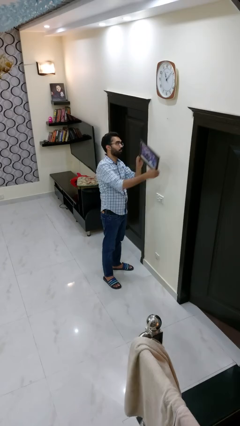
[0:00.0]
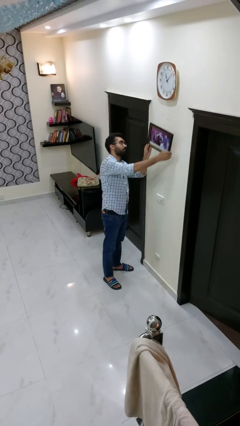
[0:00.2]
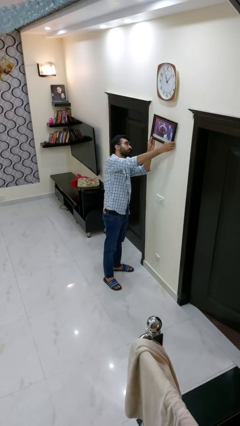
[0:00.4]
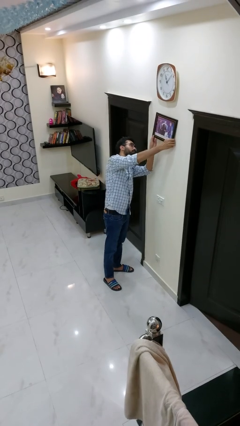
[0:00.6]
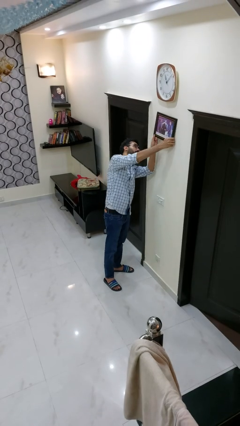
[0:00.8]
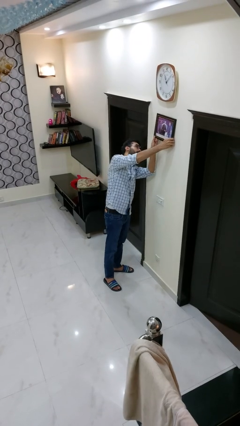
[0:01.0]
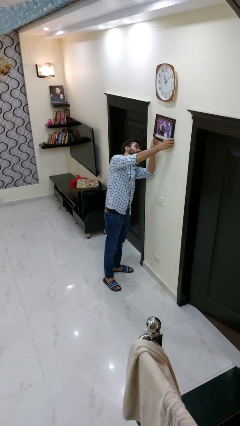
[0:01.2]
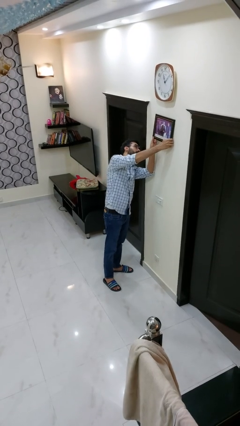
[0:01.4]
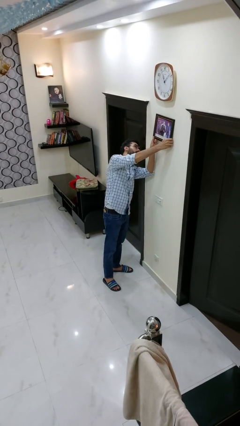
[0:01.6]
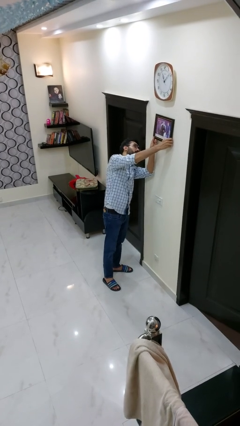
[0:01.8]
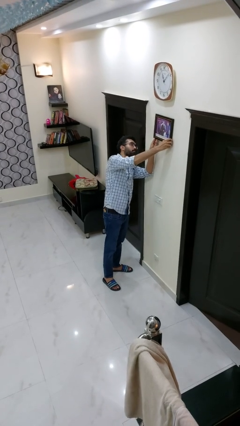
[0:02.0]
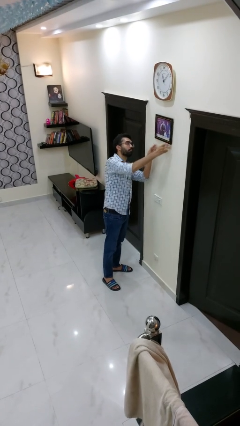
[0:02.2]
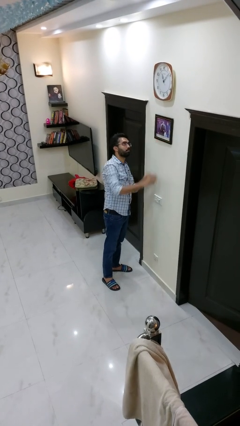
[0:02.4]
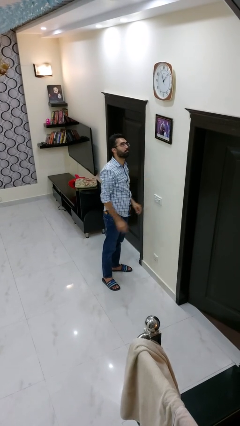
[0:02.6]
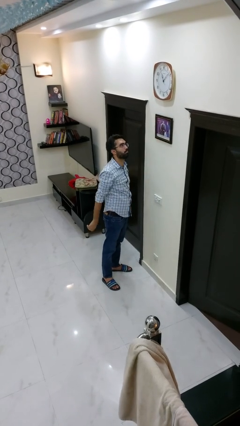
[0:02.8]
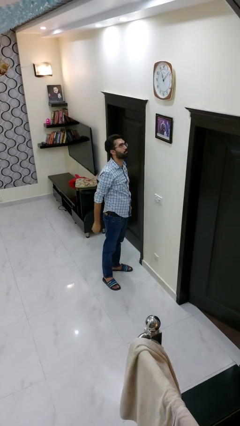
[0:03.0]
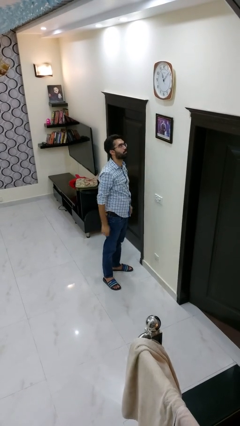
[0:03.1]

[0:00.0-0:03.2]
person puts up picture frame

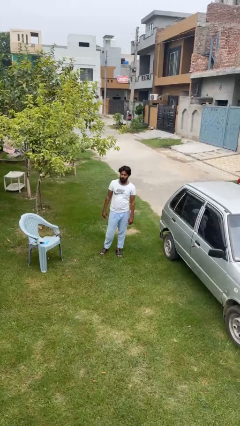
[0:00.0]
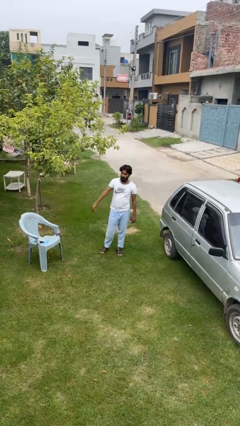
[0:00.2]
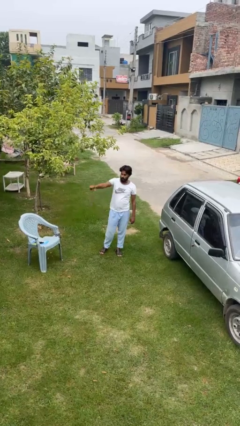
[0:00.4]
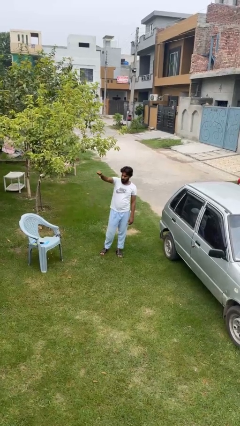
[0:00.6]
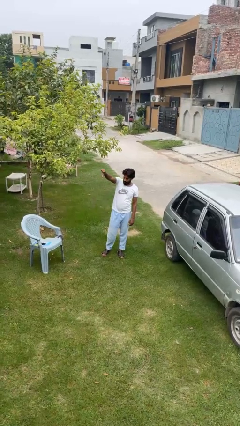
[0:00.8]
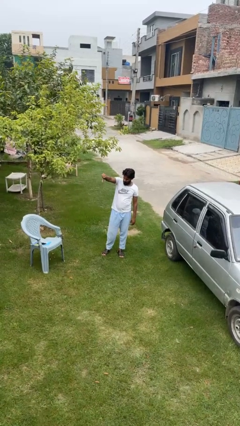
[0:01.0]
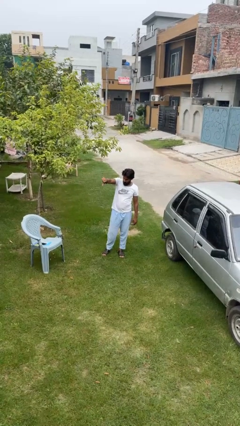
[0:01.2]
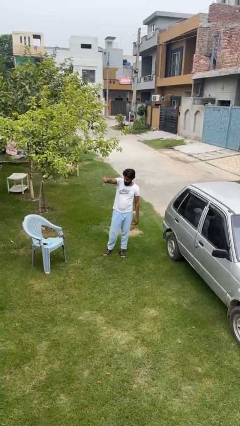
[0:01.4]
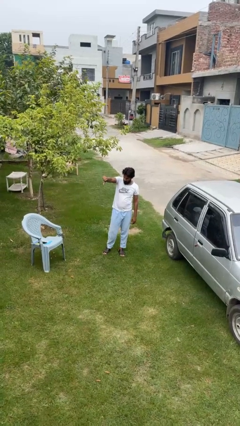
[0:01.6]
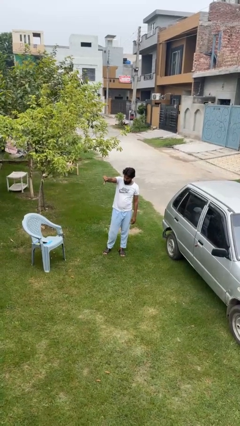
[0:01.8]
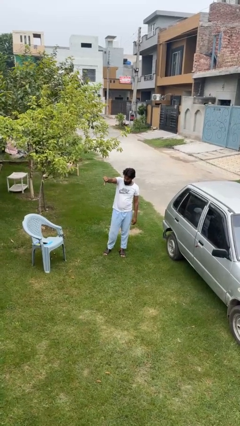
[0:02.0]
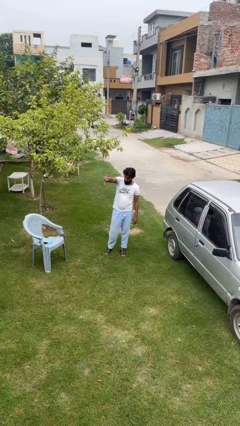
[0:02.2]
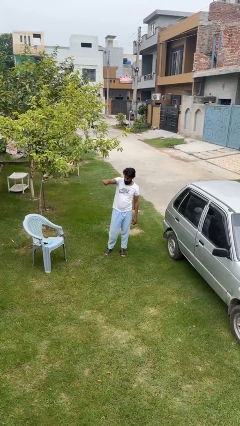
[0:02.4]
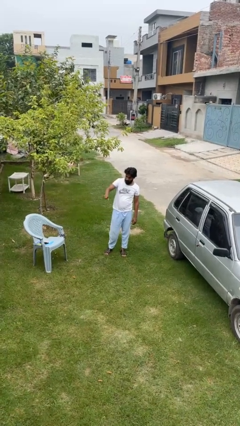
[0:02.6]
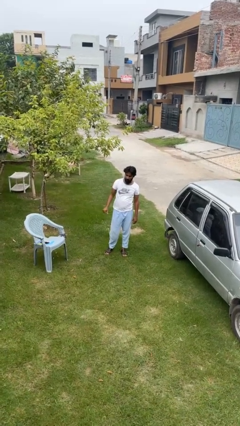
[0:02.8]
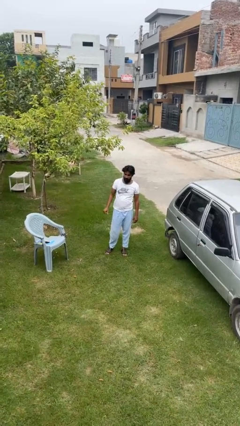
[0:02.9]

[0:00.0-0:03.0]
person gestures thumbs down

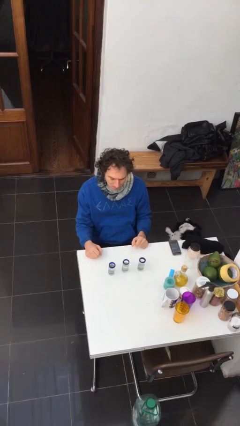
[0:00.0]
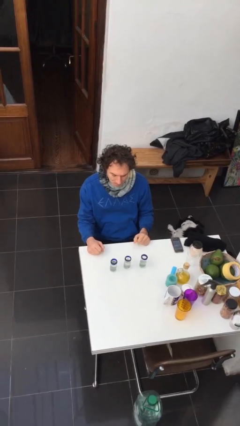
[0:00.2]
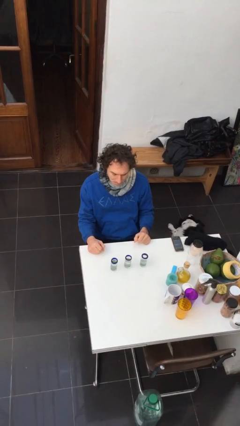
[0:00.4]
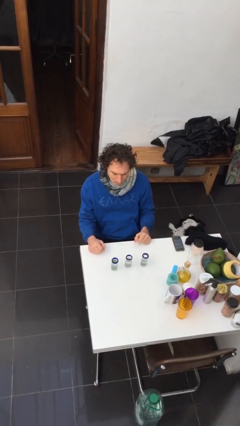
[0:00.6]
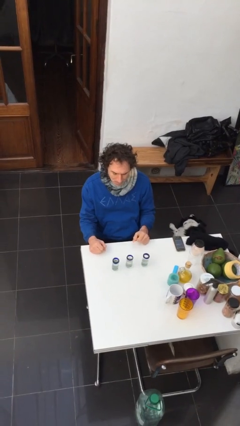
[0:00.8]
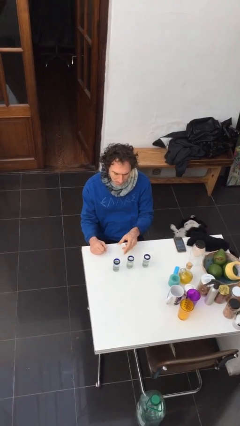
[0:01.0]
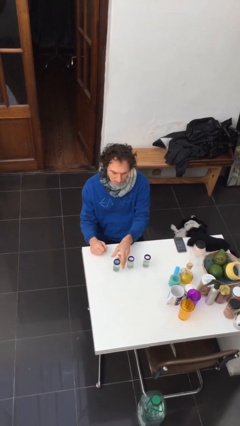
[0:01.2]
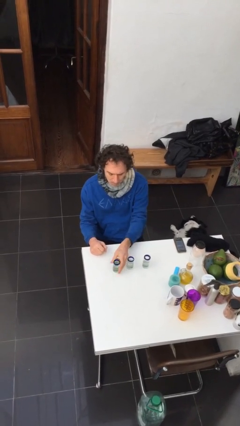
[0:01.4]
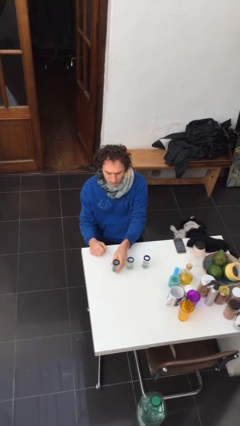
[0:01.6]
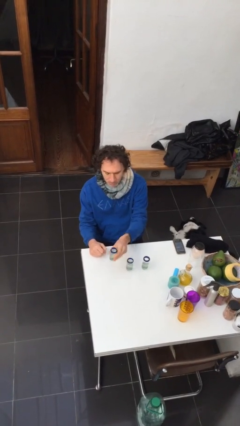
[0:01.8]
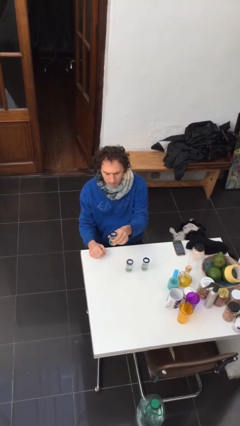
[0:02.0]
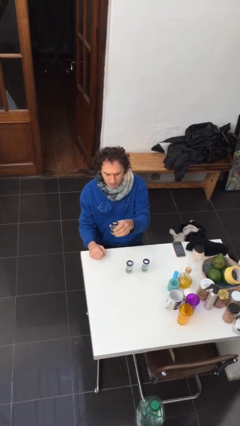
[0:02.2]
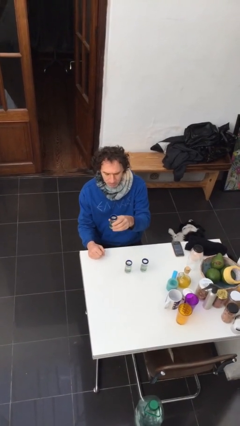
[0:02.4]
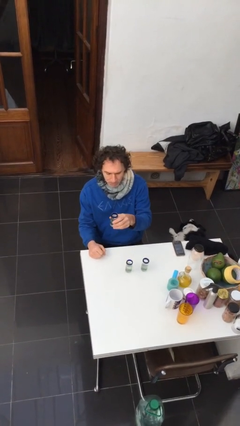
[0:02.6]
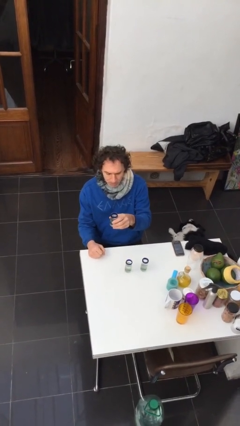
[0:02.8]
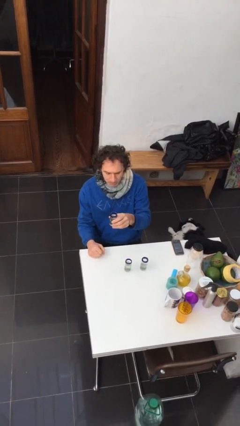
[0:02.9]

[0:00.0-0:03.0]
person picks up object from table

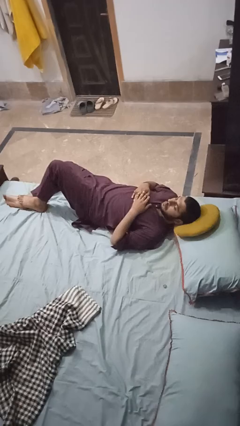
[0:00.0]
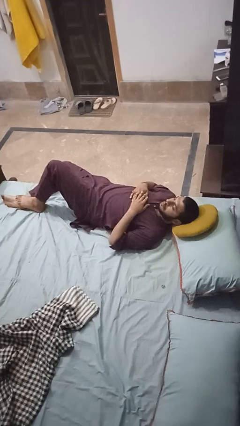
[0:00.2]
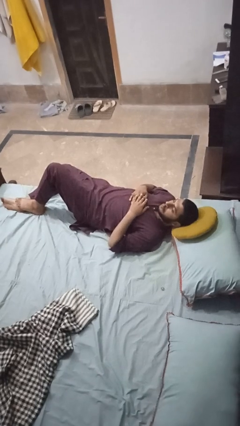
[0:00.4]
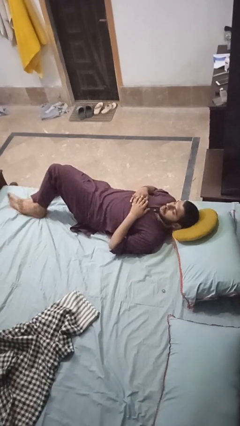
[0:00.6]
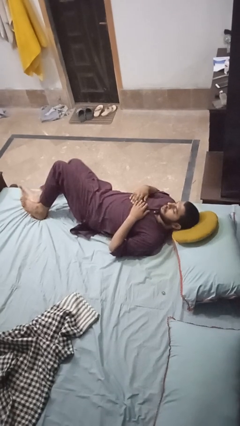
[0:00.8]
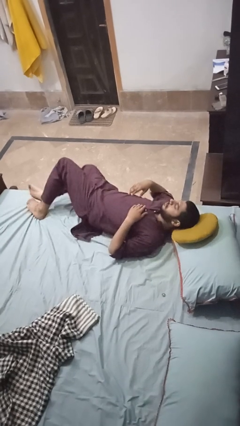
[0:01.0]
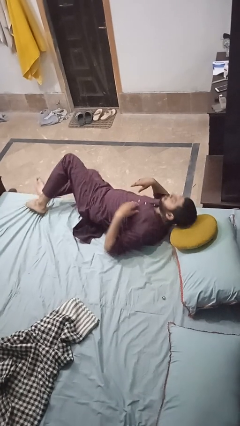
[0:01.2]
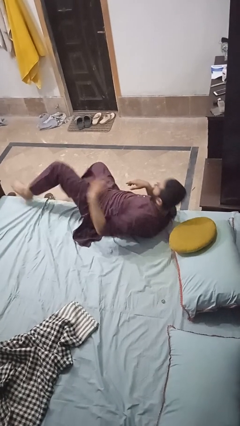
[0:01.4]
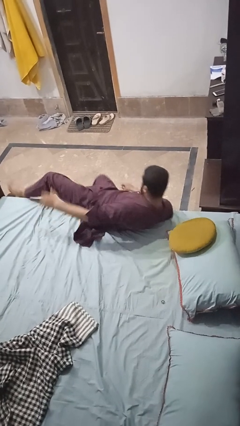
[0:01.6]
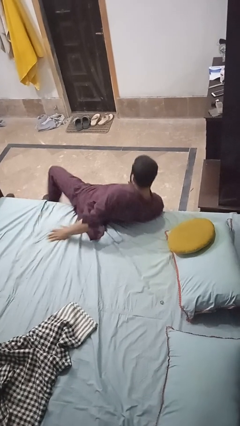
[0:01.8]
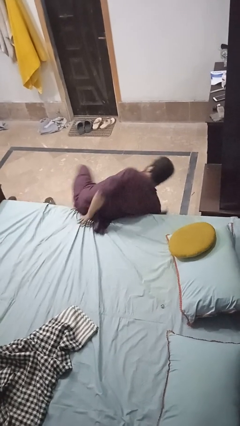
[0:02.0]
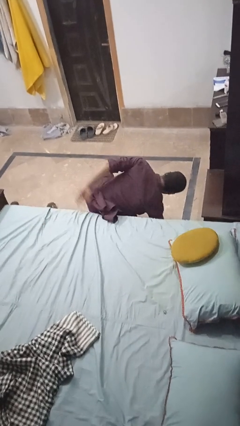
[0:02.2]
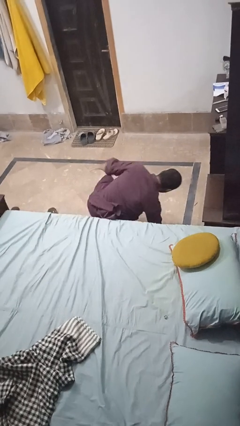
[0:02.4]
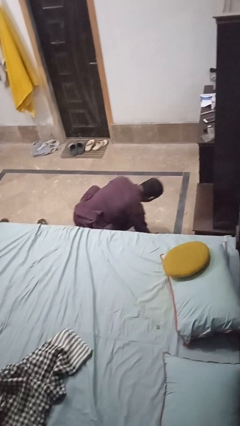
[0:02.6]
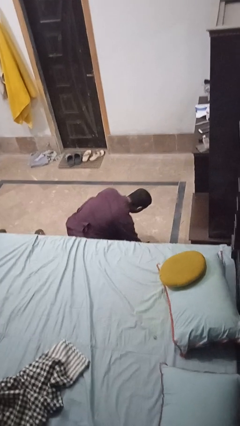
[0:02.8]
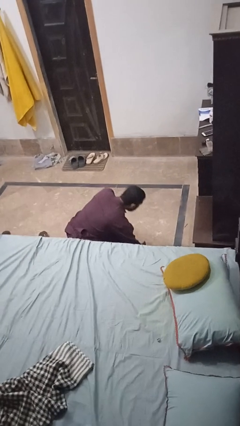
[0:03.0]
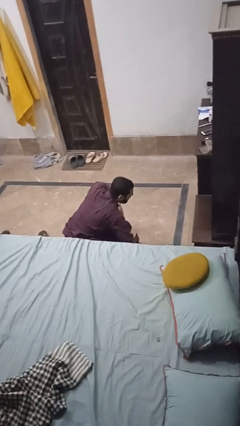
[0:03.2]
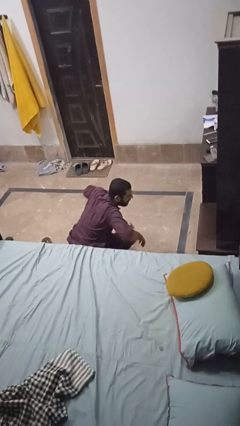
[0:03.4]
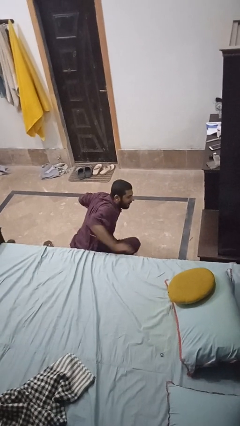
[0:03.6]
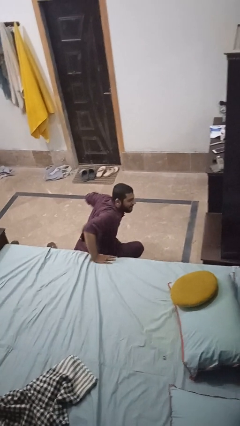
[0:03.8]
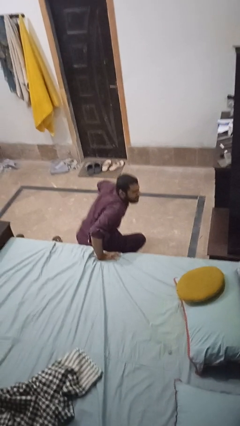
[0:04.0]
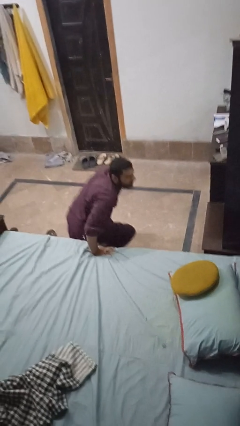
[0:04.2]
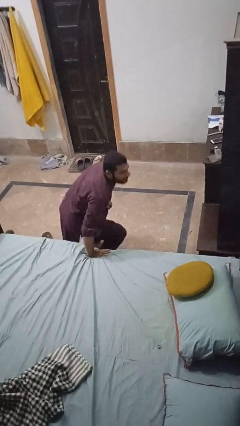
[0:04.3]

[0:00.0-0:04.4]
person falls from bed

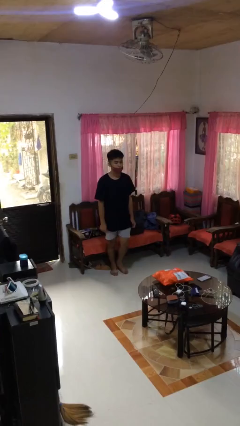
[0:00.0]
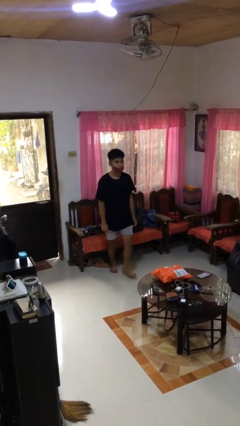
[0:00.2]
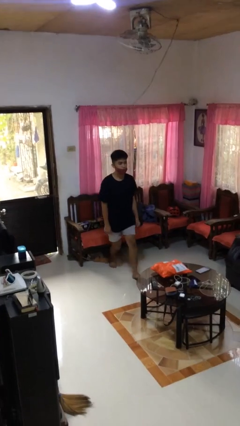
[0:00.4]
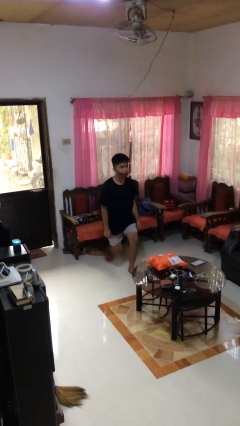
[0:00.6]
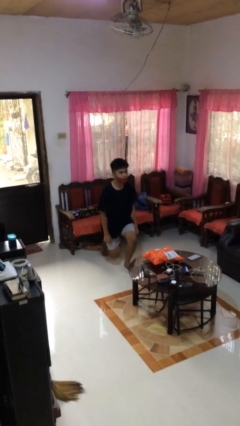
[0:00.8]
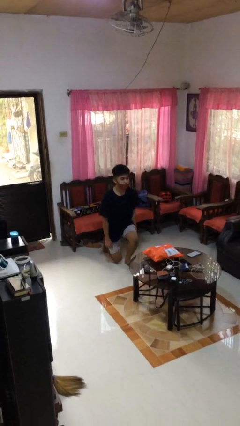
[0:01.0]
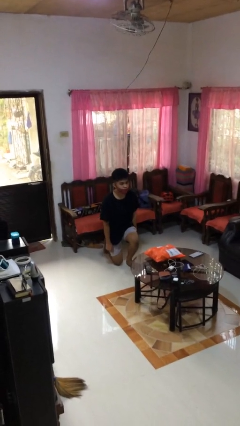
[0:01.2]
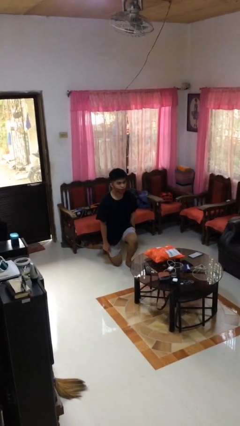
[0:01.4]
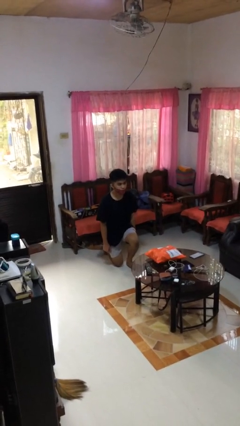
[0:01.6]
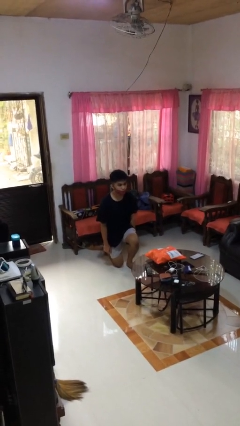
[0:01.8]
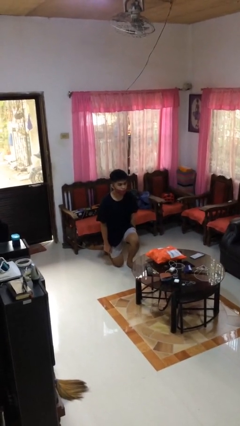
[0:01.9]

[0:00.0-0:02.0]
person kneels

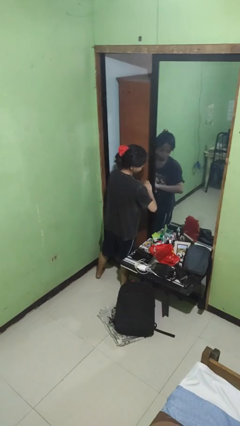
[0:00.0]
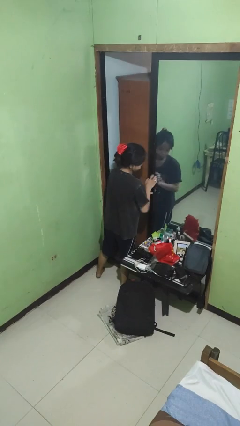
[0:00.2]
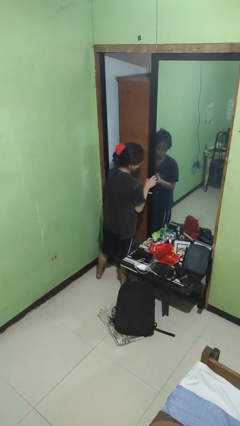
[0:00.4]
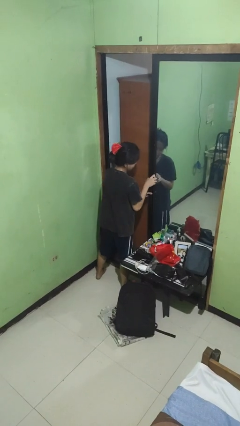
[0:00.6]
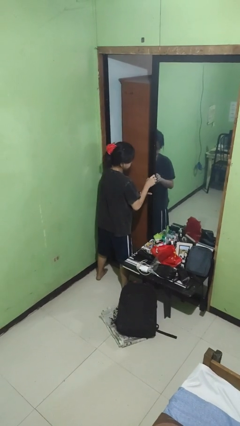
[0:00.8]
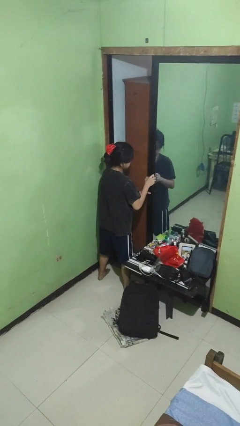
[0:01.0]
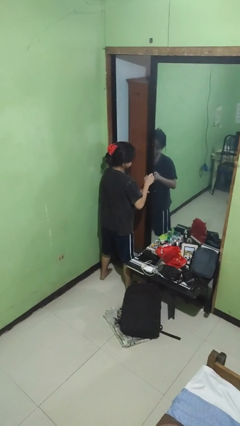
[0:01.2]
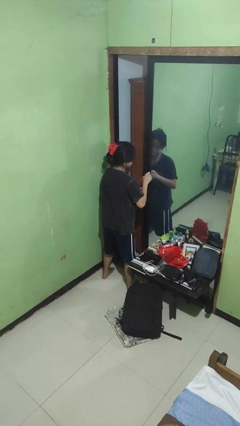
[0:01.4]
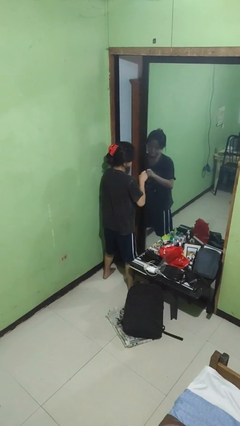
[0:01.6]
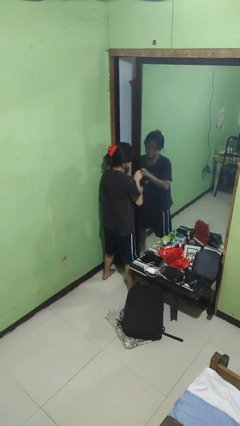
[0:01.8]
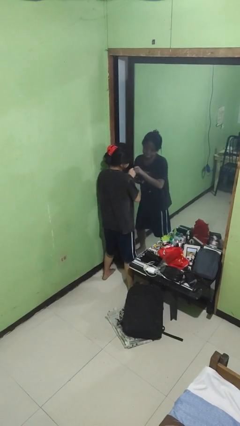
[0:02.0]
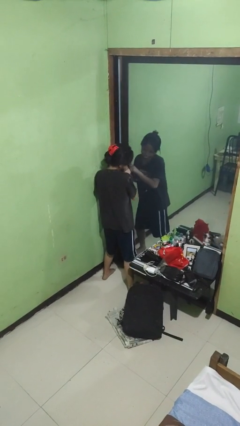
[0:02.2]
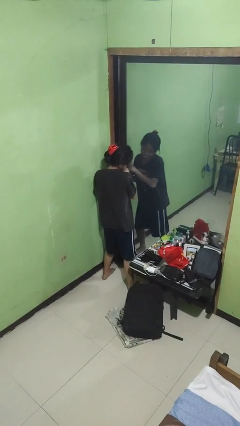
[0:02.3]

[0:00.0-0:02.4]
person closes sliding door
